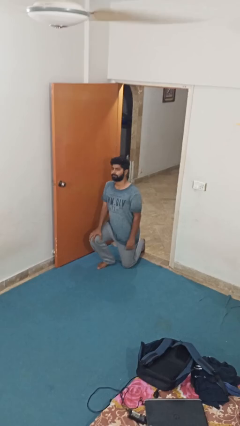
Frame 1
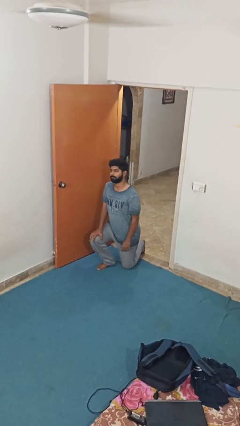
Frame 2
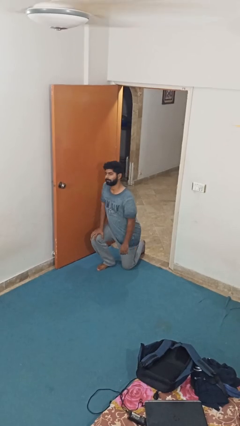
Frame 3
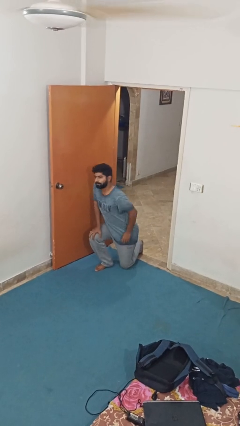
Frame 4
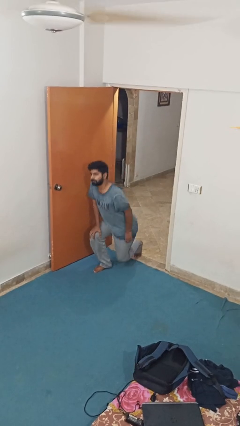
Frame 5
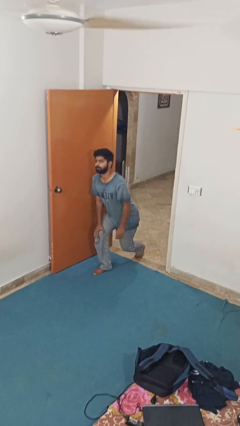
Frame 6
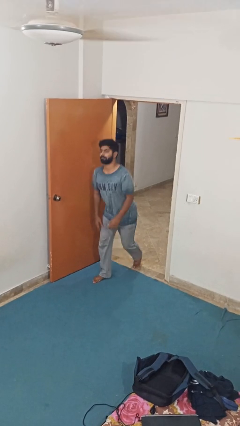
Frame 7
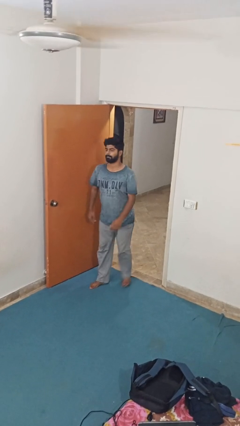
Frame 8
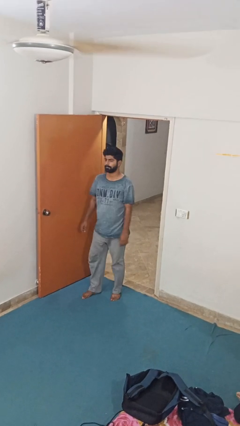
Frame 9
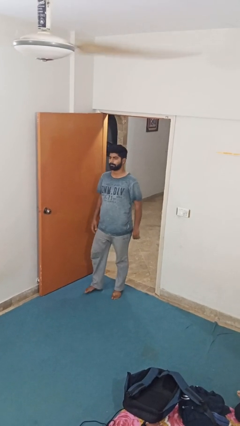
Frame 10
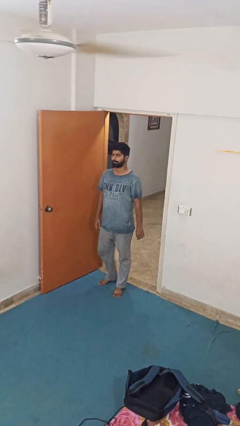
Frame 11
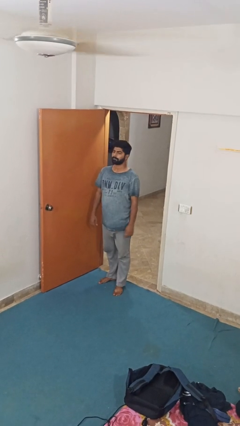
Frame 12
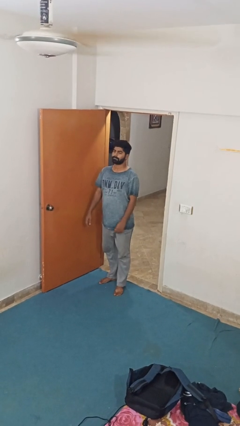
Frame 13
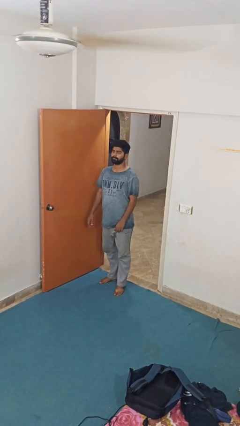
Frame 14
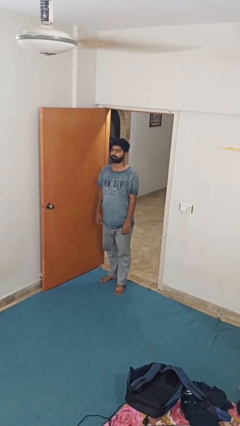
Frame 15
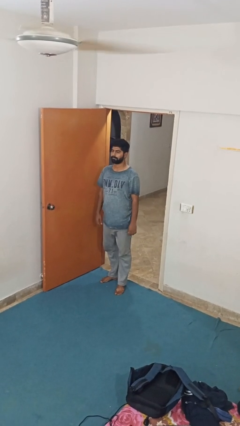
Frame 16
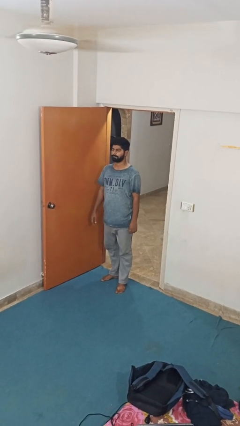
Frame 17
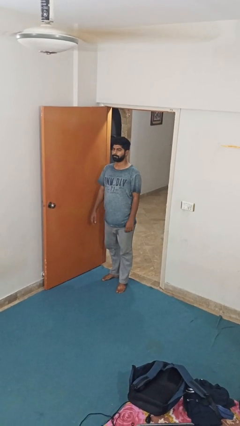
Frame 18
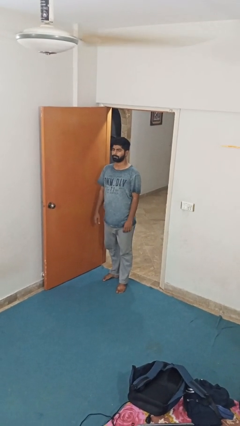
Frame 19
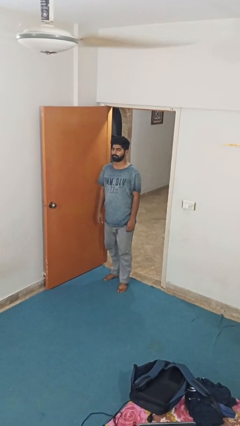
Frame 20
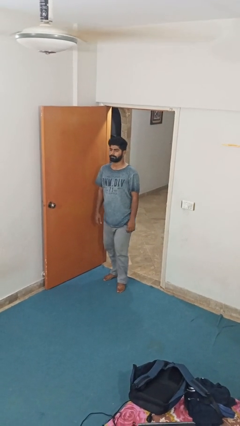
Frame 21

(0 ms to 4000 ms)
person stands up from floor

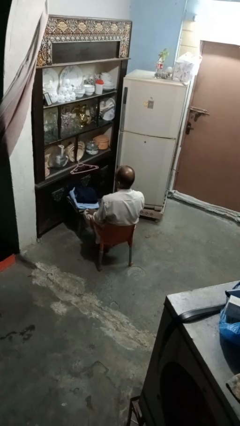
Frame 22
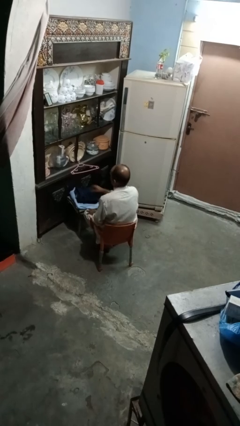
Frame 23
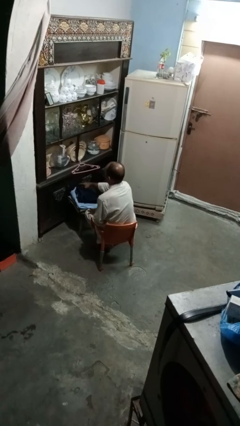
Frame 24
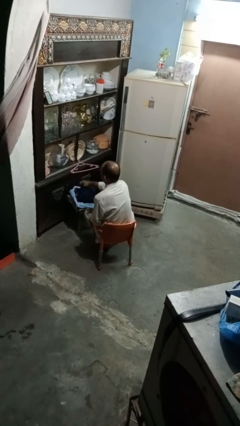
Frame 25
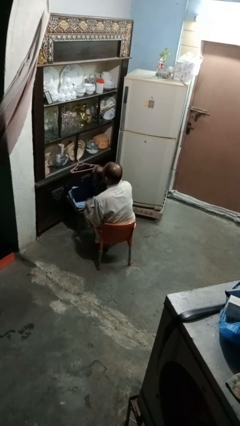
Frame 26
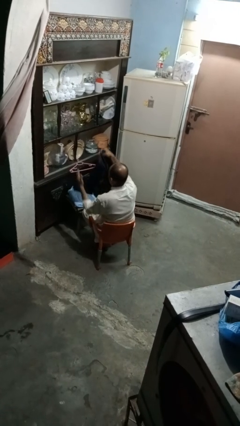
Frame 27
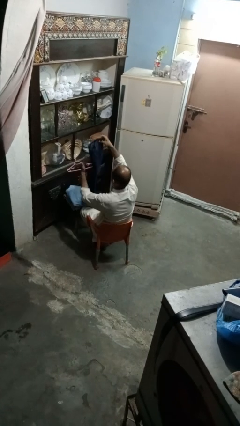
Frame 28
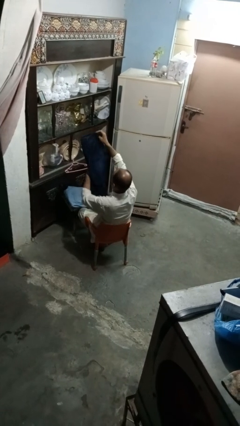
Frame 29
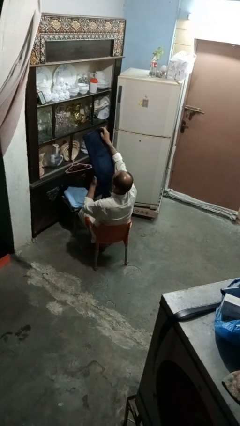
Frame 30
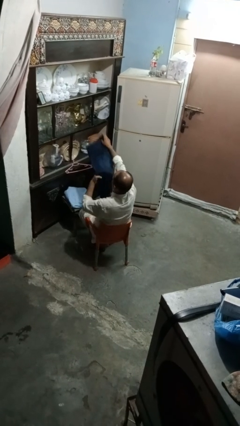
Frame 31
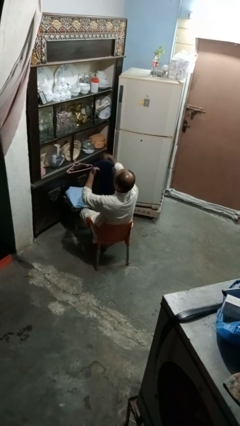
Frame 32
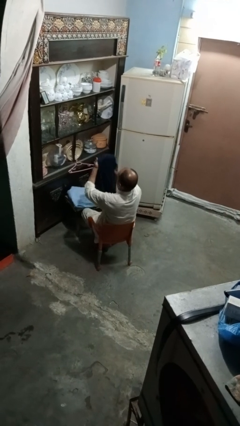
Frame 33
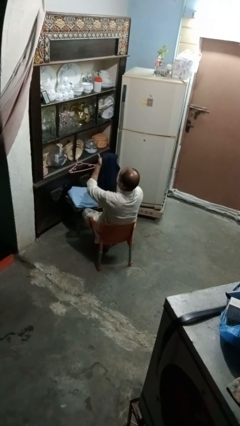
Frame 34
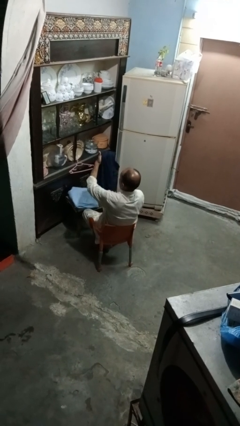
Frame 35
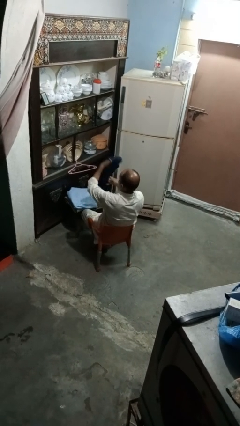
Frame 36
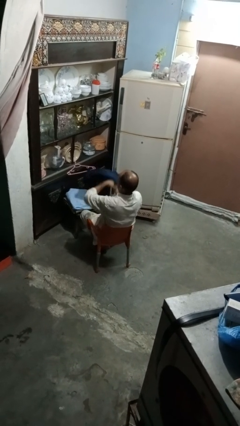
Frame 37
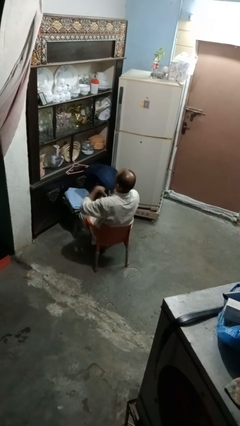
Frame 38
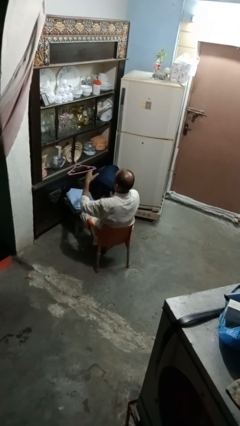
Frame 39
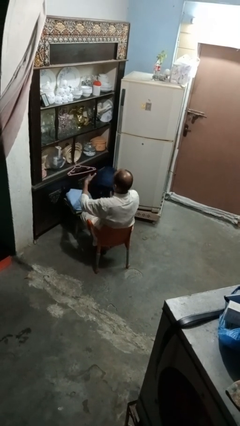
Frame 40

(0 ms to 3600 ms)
person folds pants

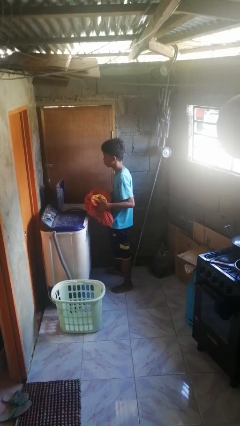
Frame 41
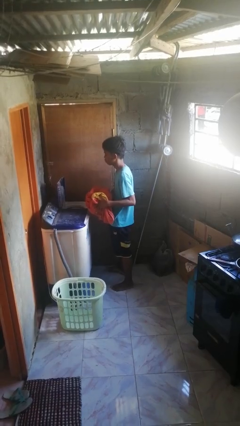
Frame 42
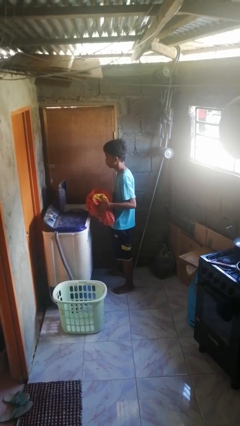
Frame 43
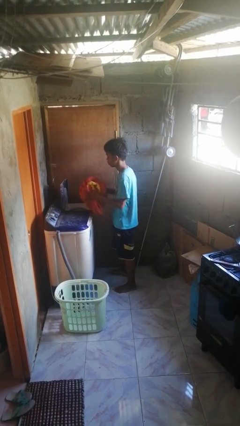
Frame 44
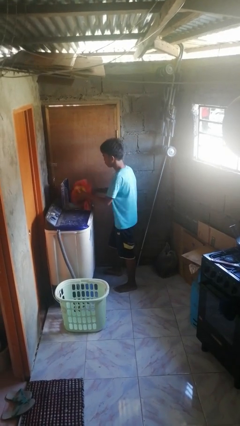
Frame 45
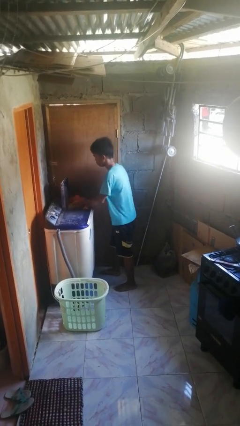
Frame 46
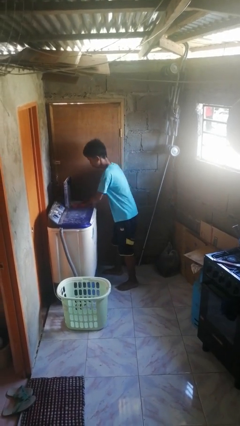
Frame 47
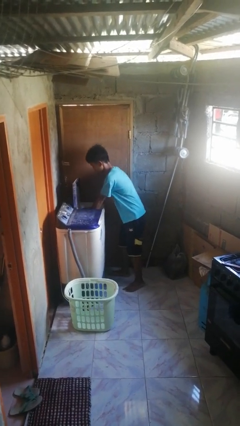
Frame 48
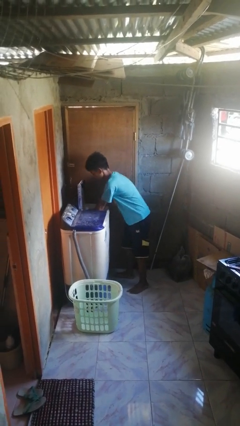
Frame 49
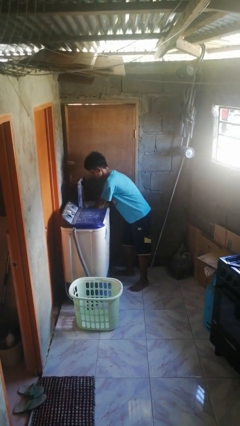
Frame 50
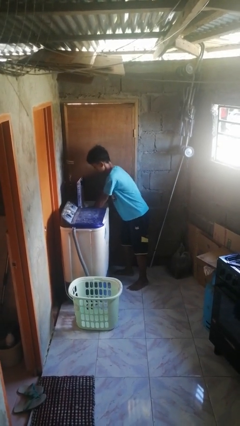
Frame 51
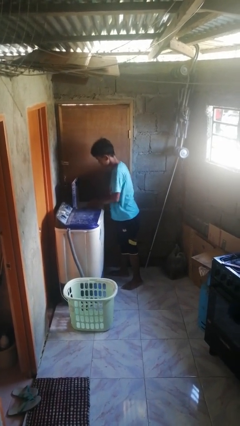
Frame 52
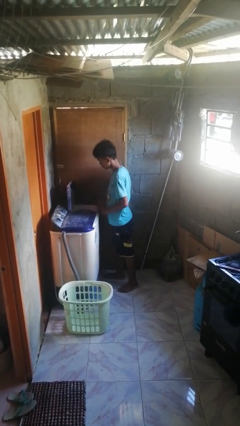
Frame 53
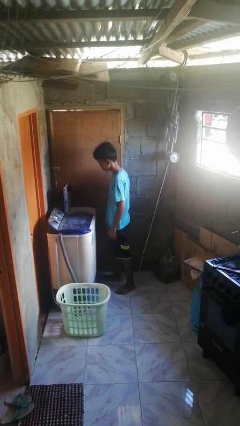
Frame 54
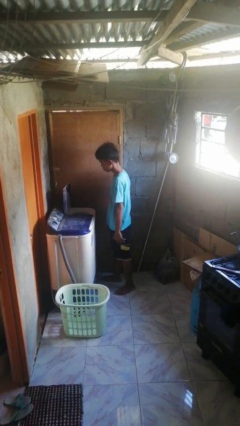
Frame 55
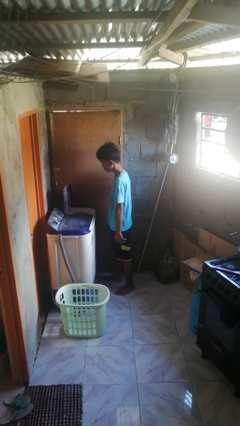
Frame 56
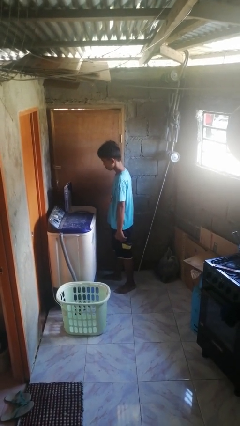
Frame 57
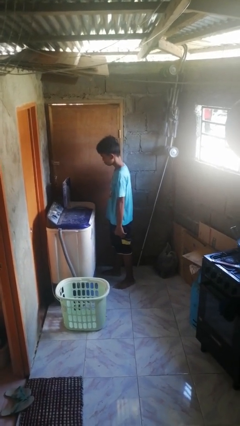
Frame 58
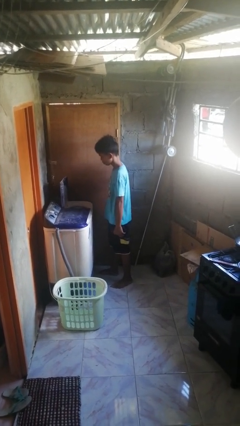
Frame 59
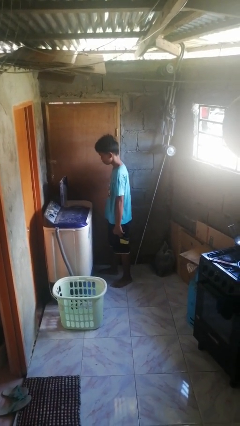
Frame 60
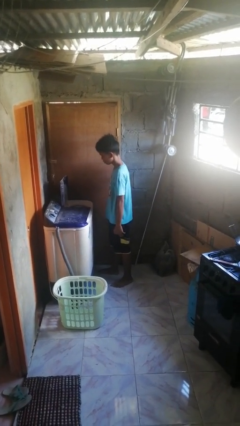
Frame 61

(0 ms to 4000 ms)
person loads dryer

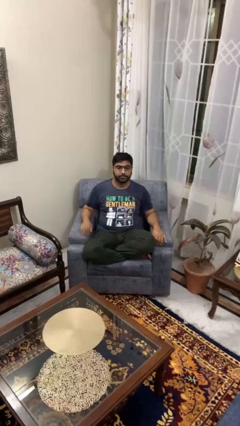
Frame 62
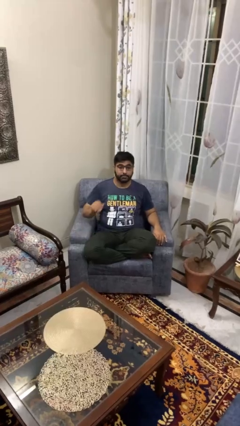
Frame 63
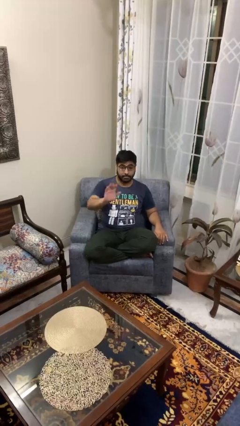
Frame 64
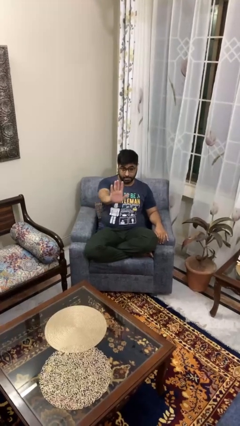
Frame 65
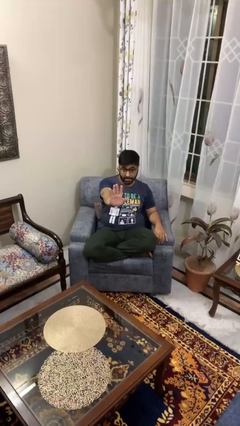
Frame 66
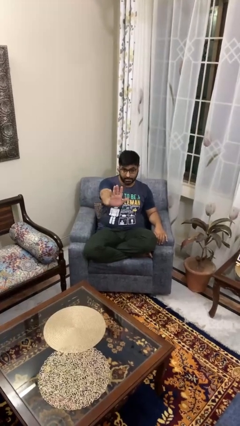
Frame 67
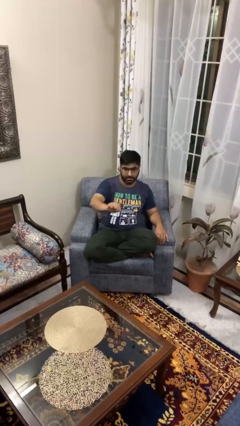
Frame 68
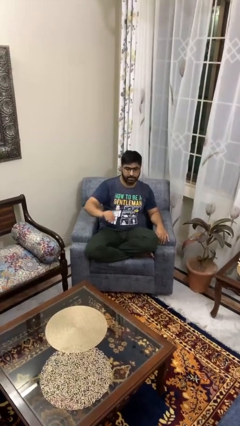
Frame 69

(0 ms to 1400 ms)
person gestures stop

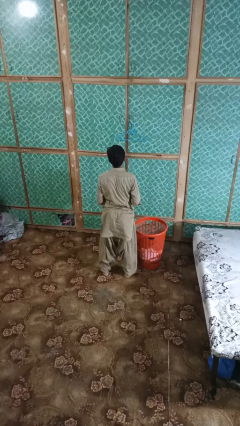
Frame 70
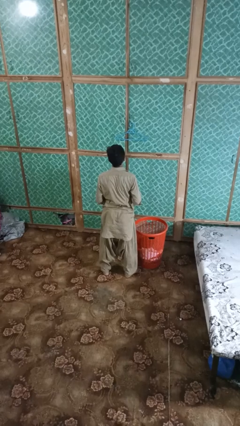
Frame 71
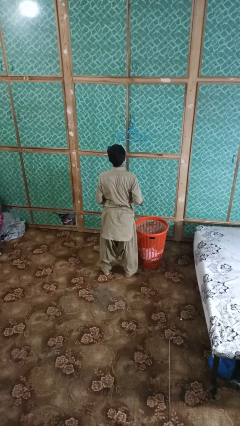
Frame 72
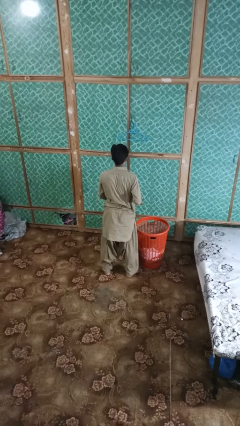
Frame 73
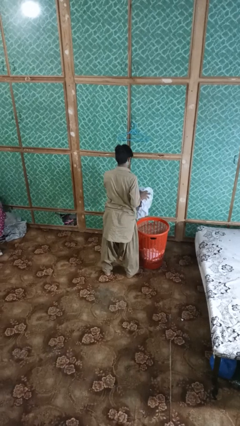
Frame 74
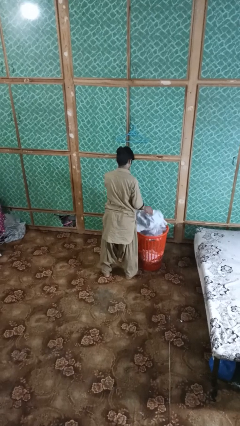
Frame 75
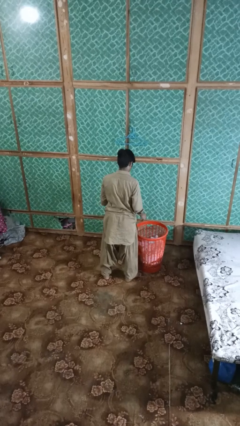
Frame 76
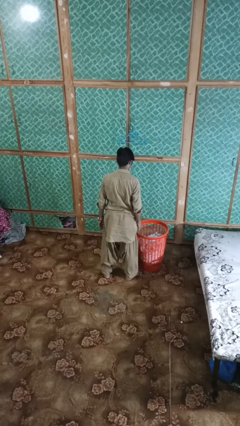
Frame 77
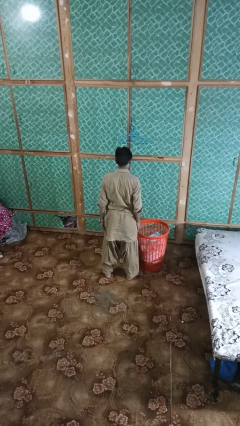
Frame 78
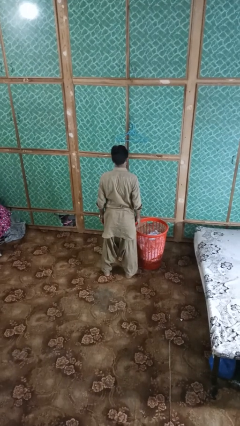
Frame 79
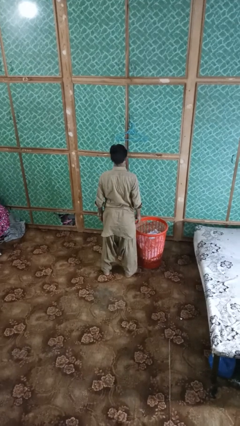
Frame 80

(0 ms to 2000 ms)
person puts object into basket

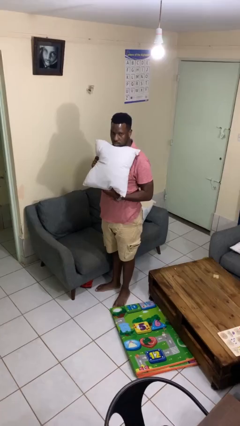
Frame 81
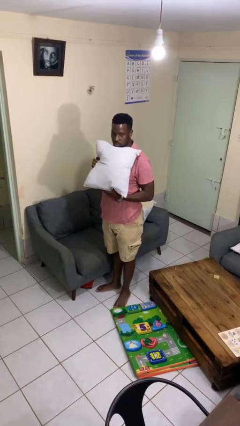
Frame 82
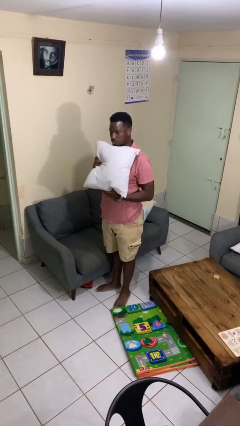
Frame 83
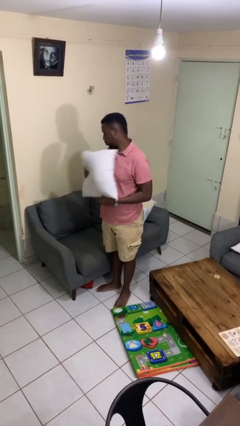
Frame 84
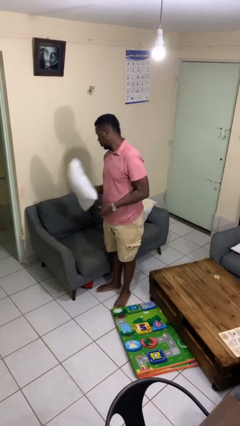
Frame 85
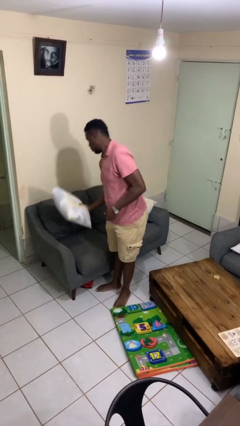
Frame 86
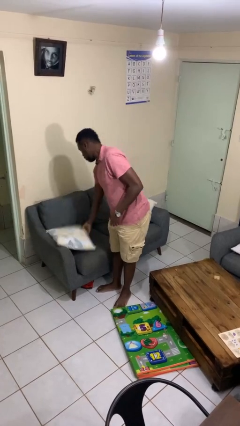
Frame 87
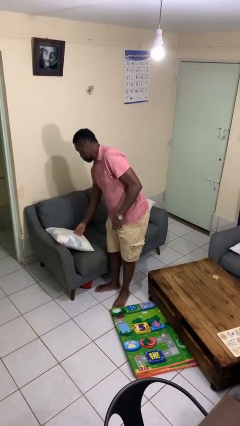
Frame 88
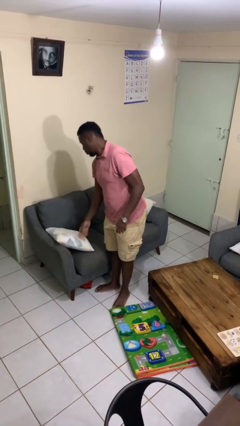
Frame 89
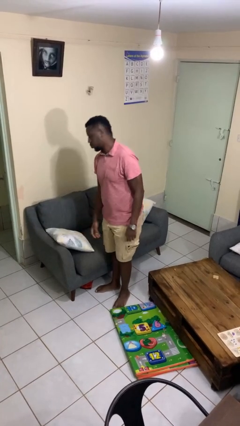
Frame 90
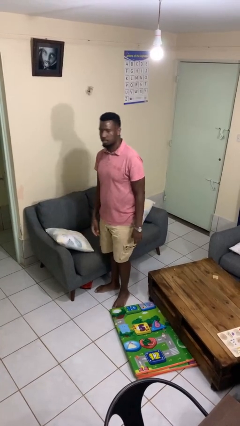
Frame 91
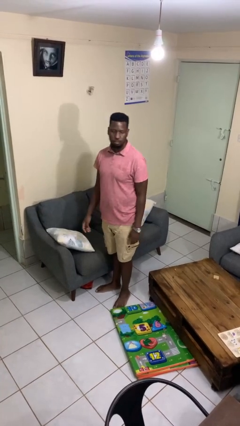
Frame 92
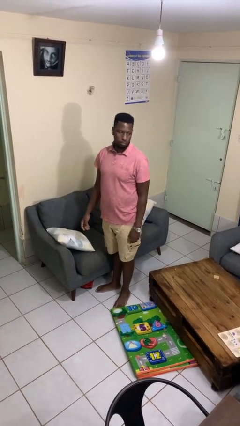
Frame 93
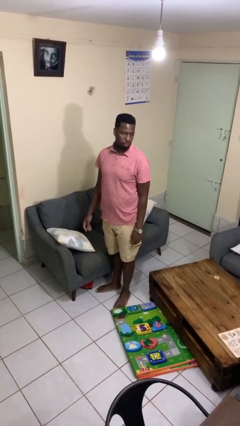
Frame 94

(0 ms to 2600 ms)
person puts down object on couch
